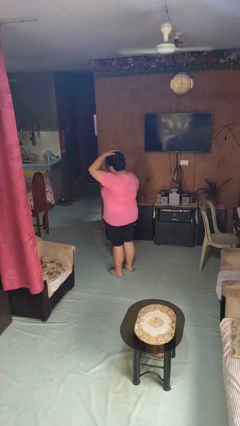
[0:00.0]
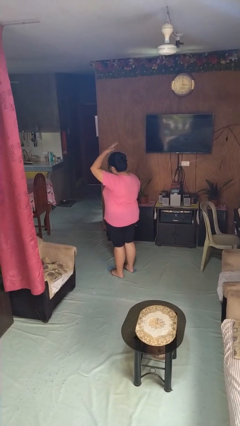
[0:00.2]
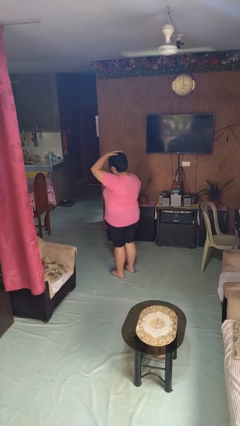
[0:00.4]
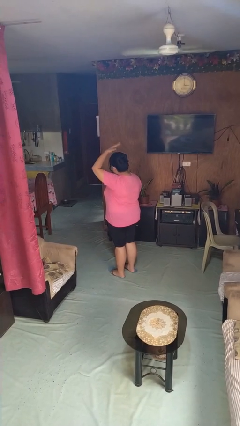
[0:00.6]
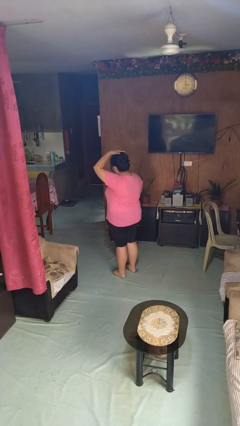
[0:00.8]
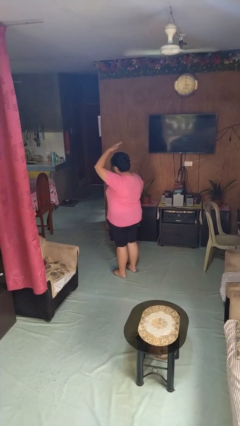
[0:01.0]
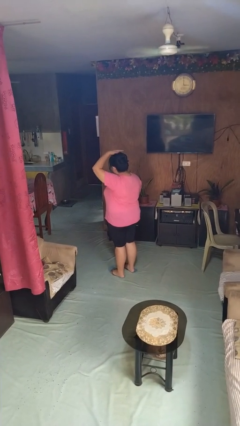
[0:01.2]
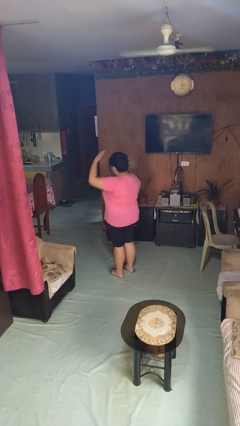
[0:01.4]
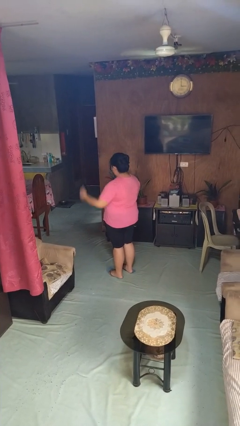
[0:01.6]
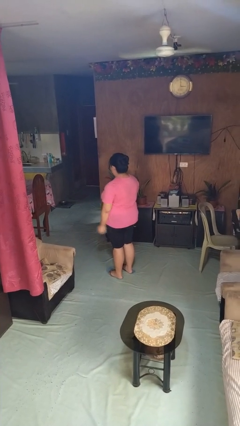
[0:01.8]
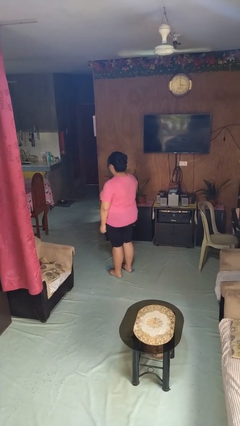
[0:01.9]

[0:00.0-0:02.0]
person pats head

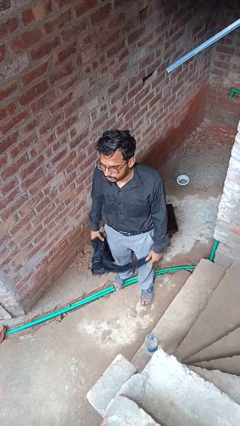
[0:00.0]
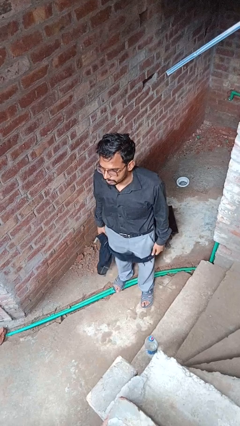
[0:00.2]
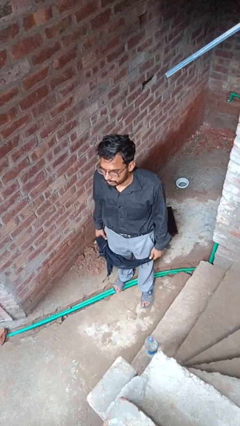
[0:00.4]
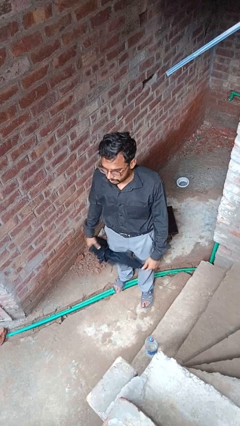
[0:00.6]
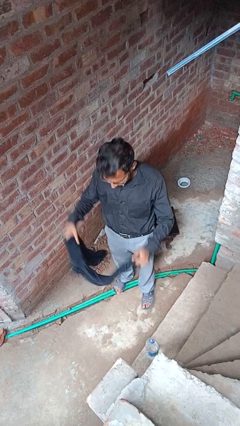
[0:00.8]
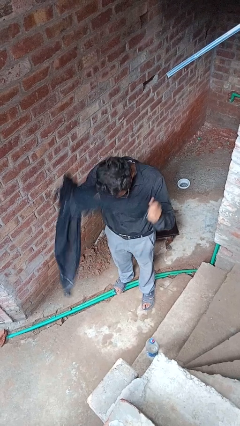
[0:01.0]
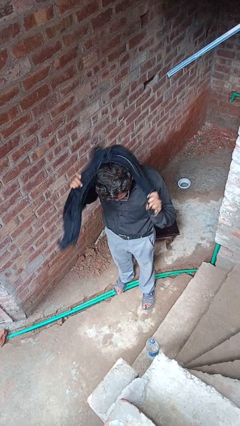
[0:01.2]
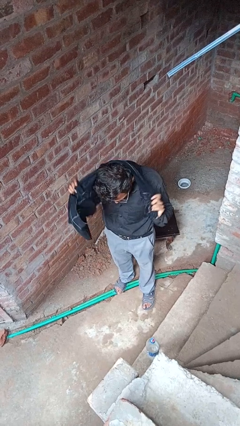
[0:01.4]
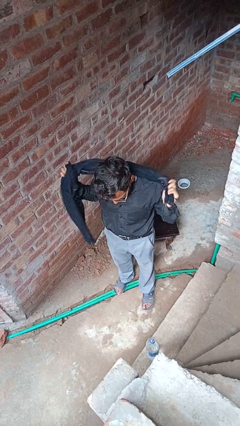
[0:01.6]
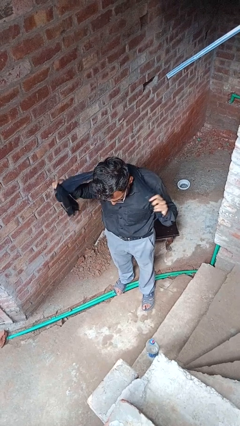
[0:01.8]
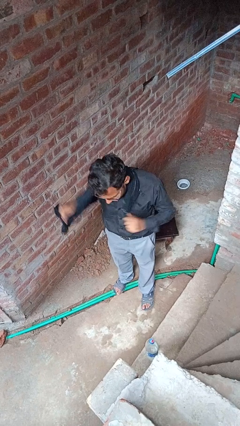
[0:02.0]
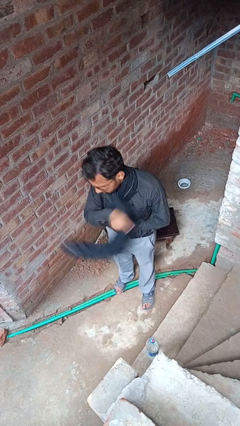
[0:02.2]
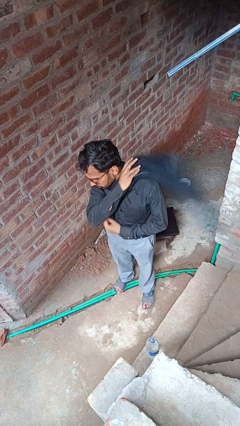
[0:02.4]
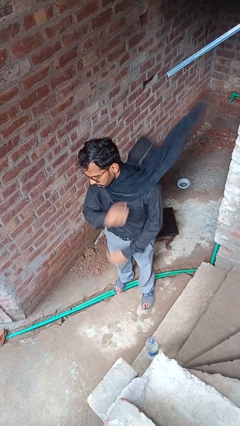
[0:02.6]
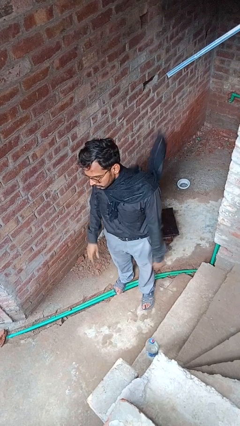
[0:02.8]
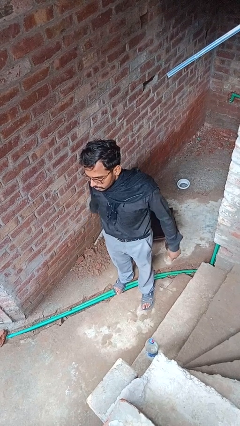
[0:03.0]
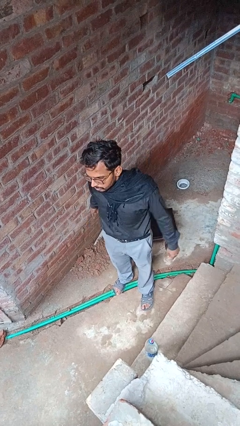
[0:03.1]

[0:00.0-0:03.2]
person puts on scarf

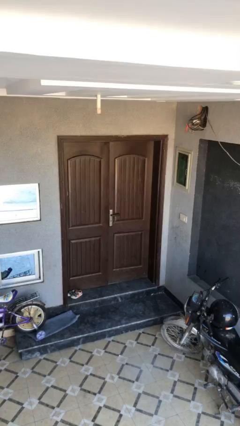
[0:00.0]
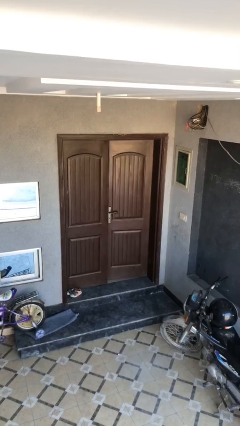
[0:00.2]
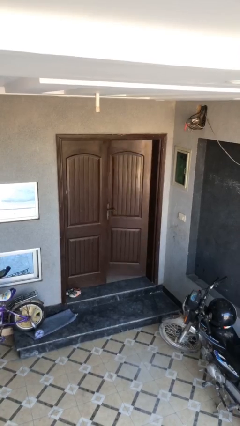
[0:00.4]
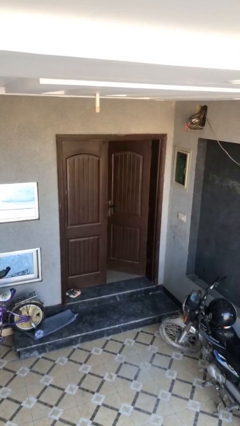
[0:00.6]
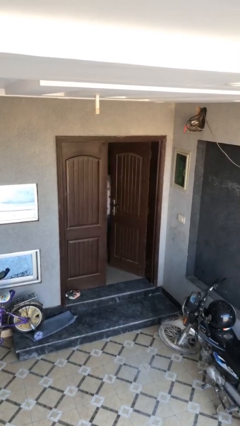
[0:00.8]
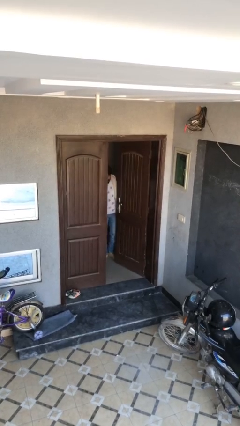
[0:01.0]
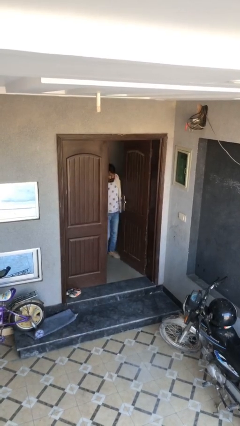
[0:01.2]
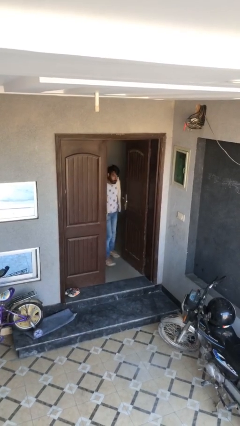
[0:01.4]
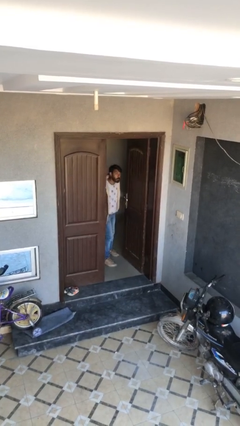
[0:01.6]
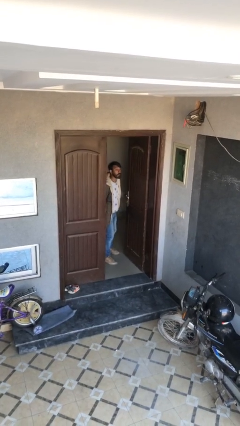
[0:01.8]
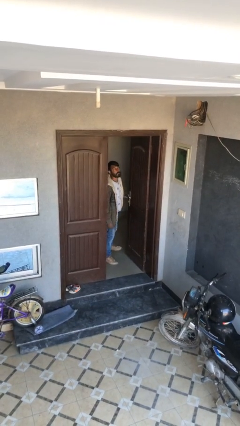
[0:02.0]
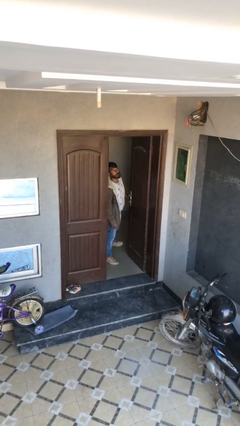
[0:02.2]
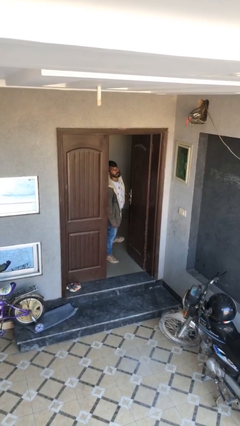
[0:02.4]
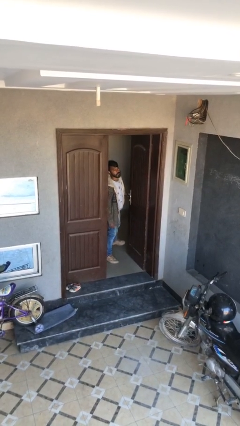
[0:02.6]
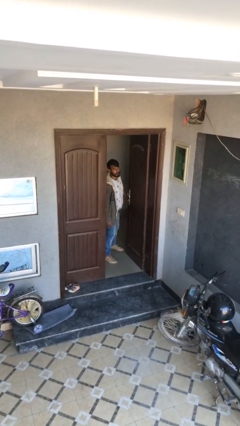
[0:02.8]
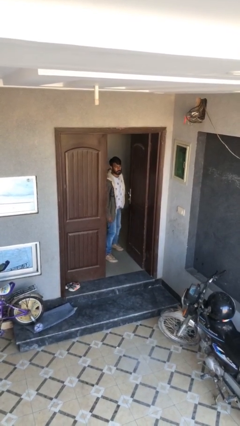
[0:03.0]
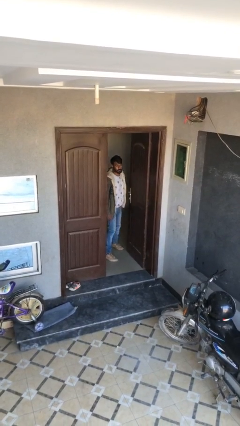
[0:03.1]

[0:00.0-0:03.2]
person opens facility door

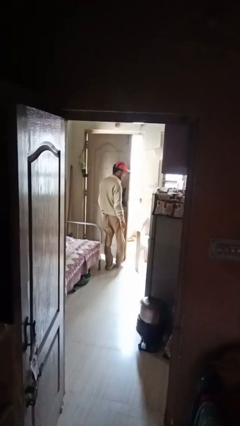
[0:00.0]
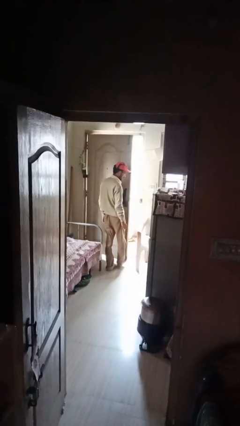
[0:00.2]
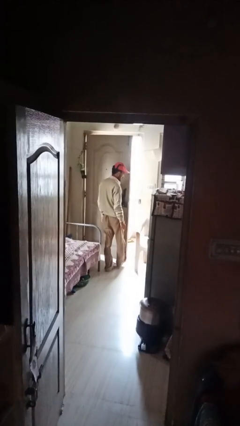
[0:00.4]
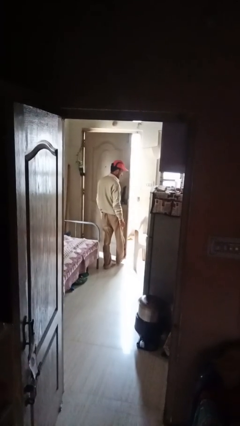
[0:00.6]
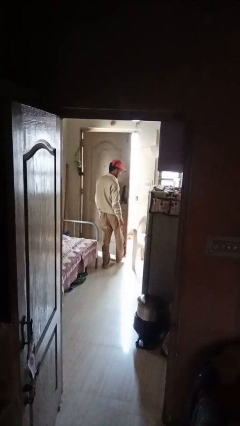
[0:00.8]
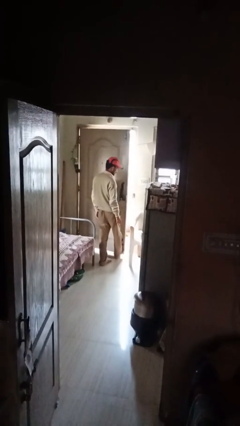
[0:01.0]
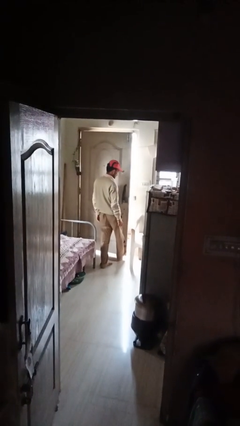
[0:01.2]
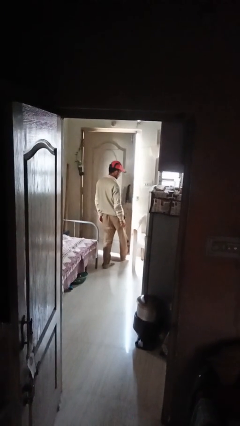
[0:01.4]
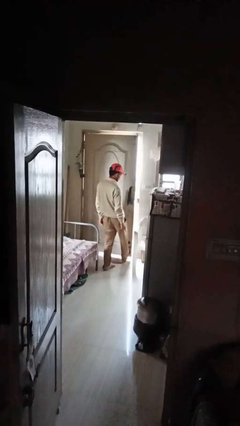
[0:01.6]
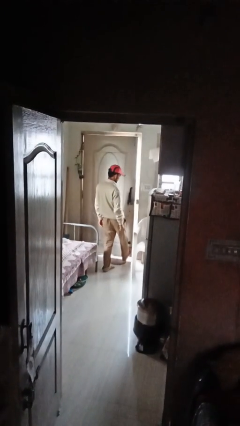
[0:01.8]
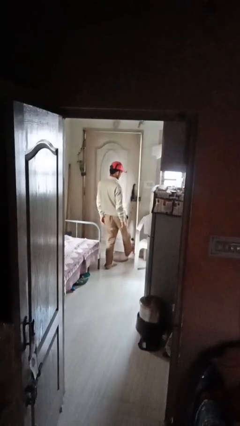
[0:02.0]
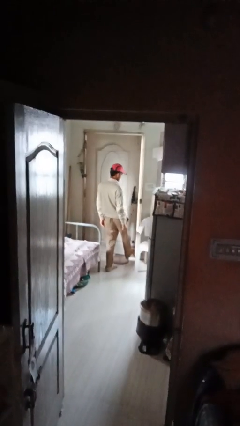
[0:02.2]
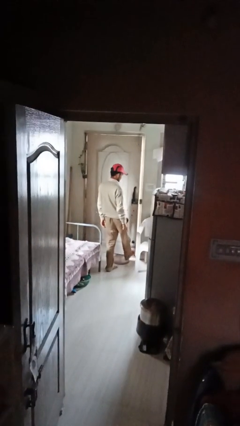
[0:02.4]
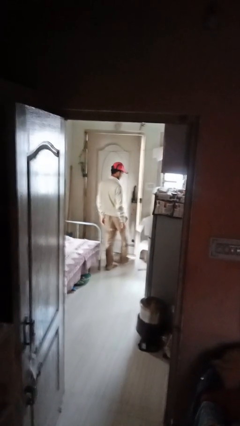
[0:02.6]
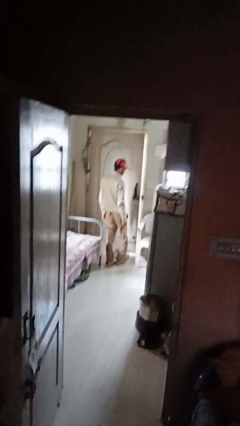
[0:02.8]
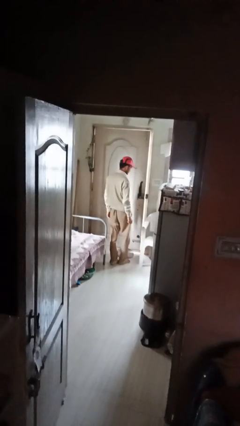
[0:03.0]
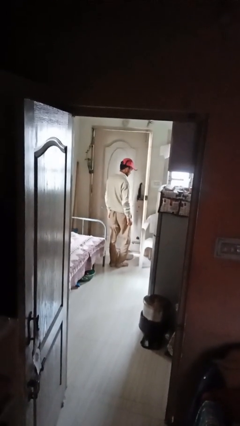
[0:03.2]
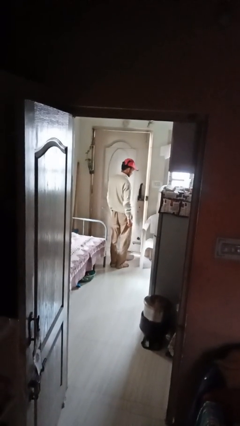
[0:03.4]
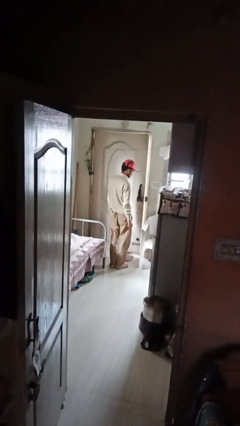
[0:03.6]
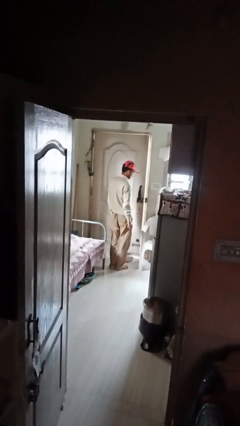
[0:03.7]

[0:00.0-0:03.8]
person closes door with foot

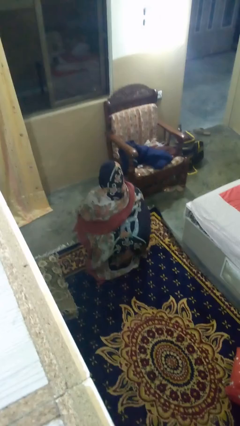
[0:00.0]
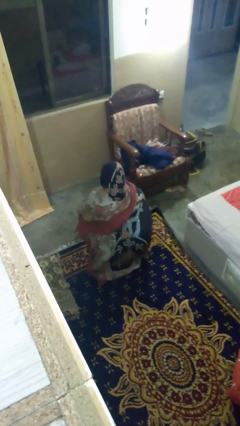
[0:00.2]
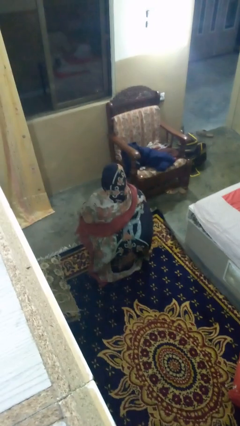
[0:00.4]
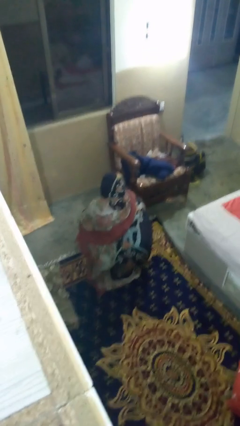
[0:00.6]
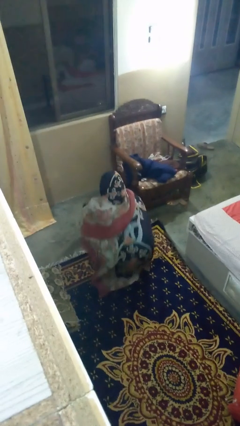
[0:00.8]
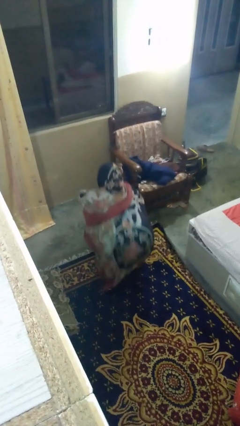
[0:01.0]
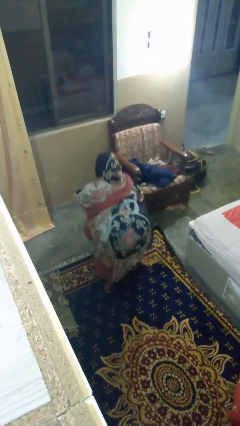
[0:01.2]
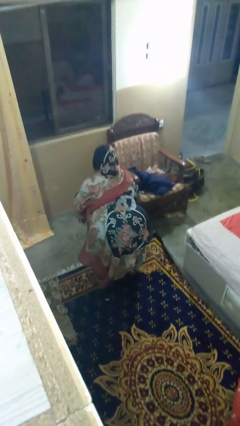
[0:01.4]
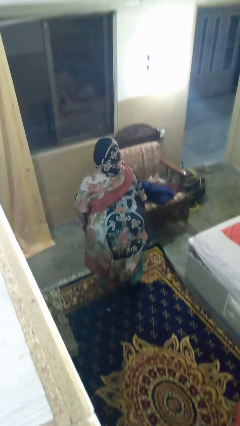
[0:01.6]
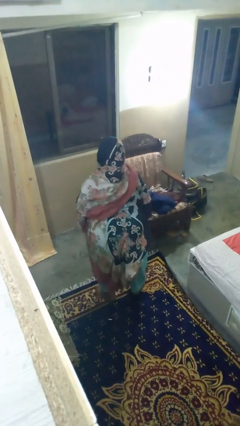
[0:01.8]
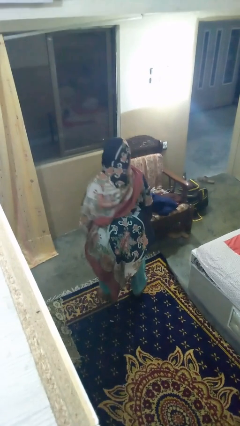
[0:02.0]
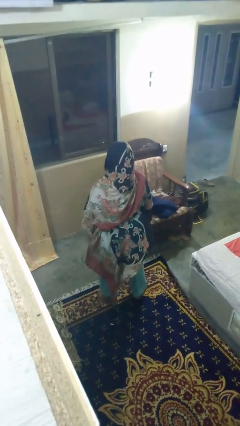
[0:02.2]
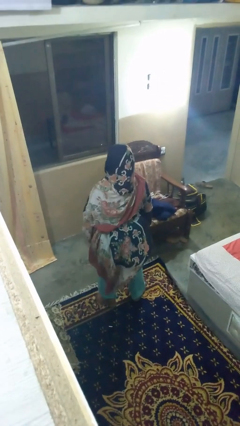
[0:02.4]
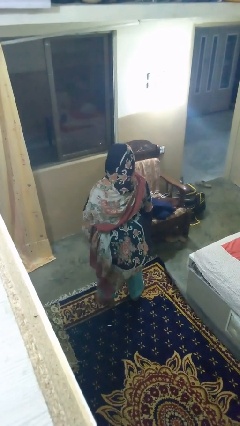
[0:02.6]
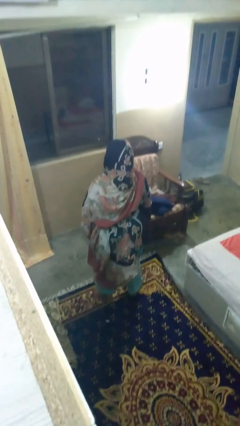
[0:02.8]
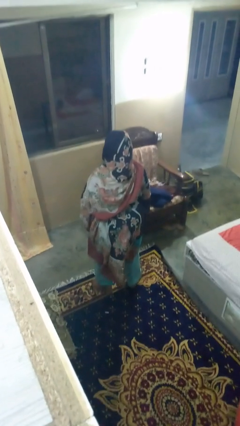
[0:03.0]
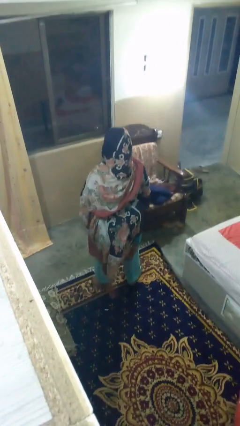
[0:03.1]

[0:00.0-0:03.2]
person stands up

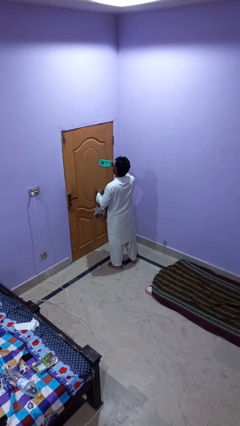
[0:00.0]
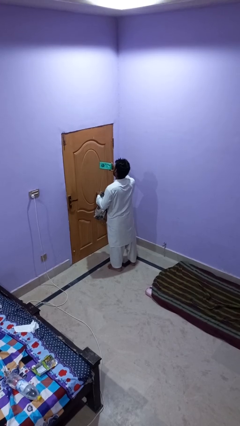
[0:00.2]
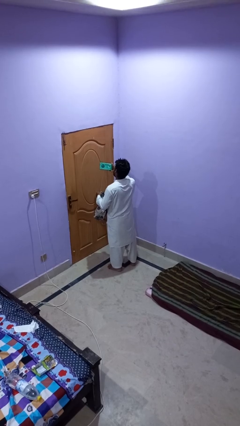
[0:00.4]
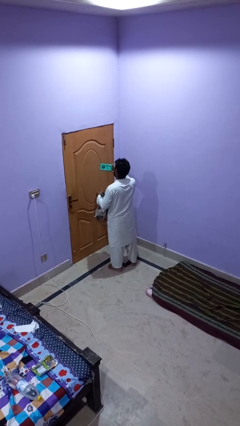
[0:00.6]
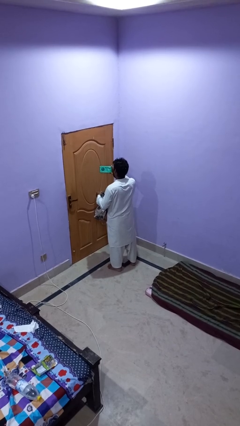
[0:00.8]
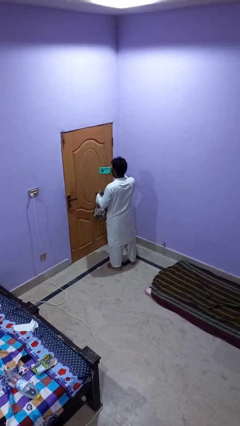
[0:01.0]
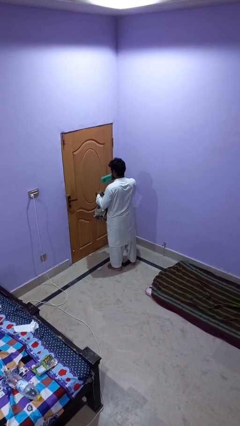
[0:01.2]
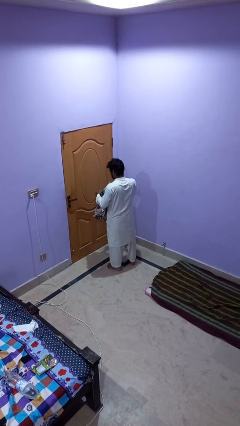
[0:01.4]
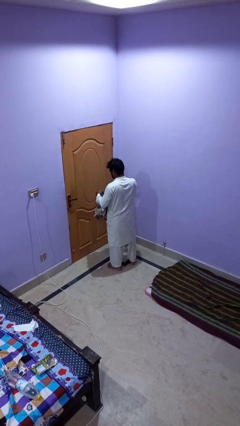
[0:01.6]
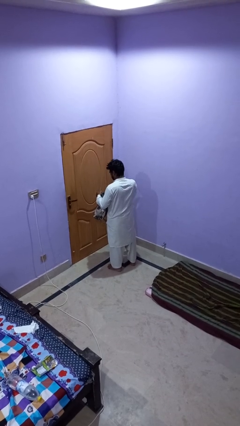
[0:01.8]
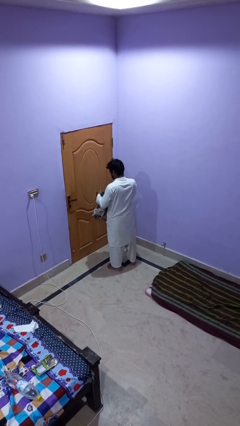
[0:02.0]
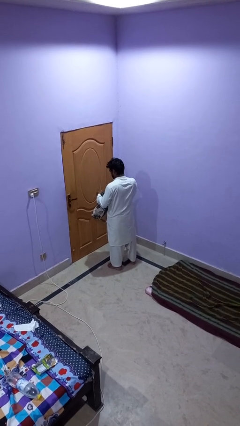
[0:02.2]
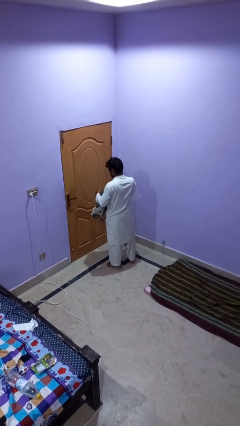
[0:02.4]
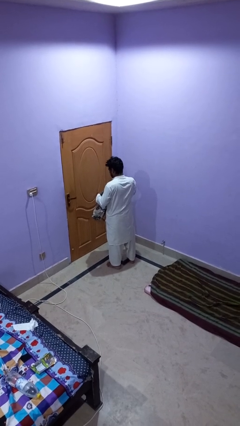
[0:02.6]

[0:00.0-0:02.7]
person puts object into backpack
